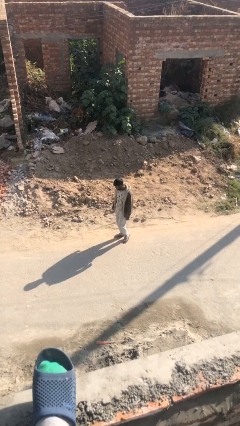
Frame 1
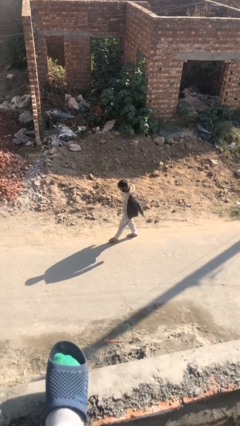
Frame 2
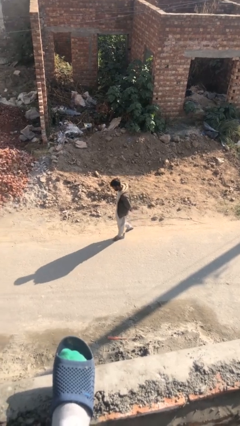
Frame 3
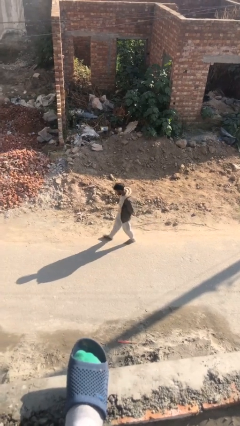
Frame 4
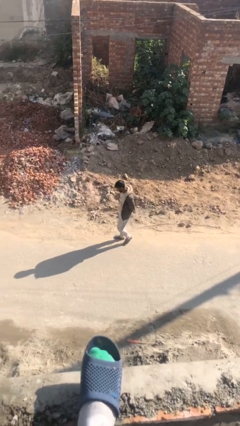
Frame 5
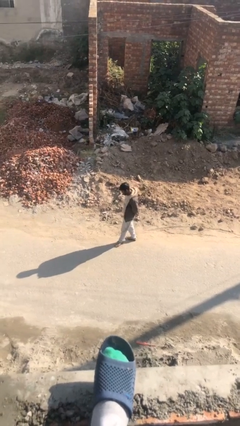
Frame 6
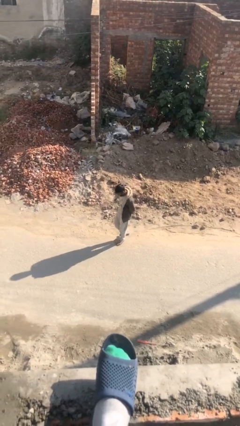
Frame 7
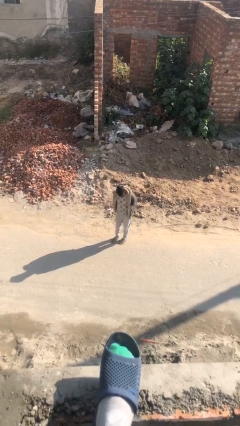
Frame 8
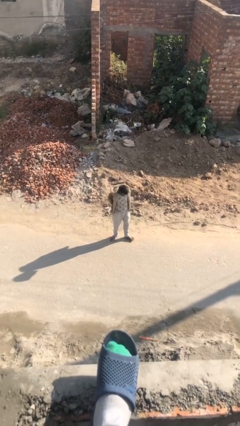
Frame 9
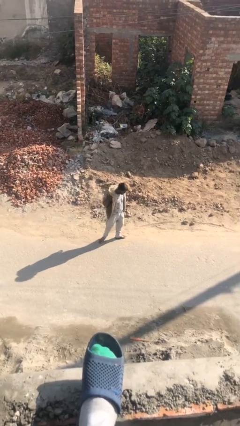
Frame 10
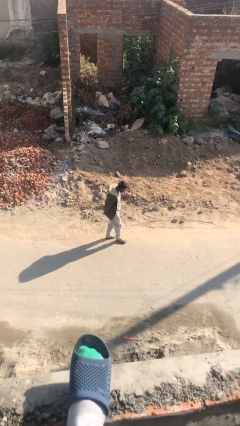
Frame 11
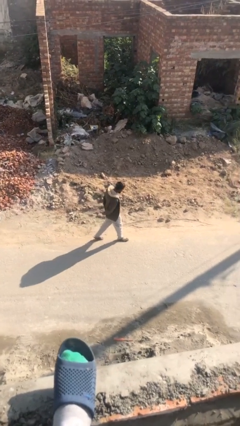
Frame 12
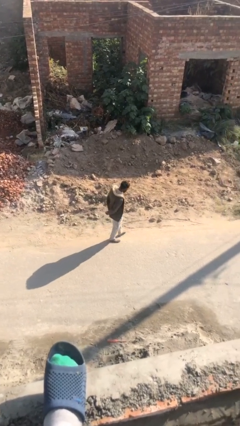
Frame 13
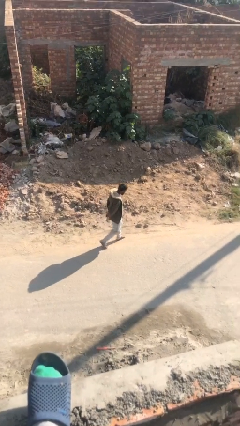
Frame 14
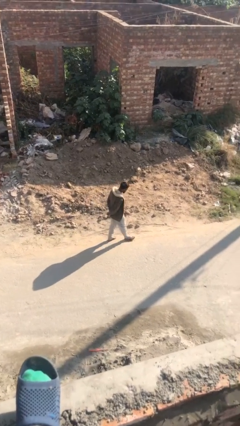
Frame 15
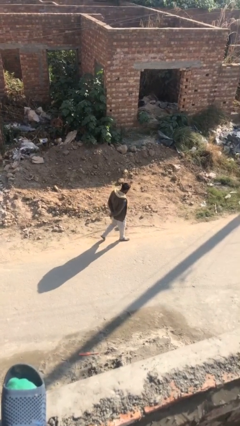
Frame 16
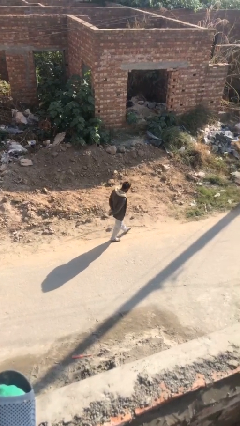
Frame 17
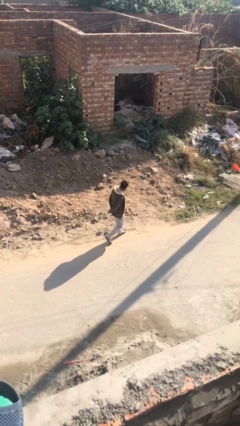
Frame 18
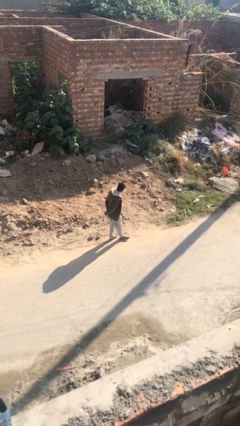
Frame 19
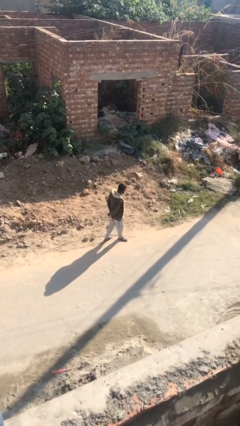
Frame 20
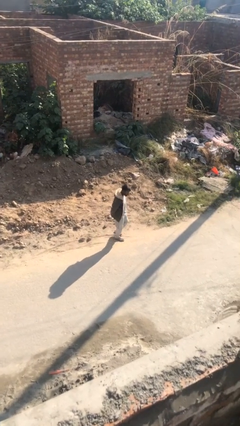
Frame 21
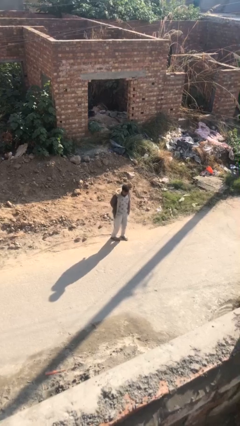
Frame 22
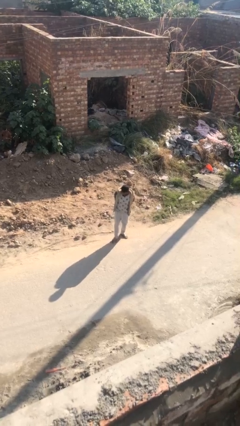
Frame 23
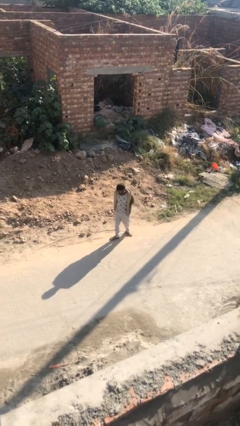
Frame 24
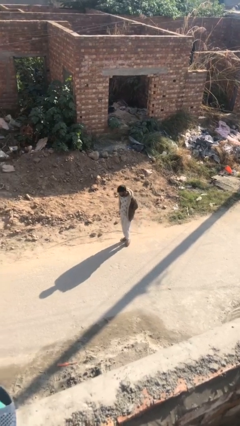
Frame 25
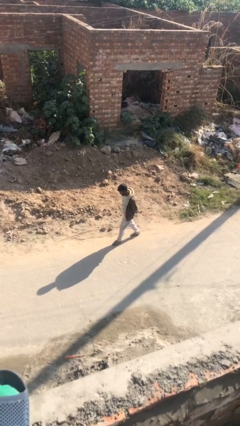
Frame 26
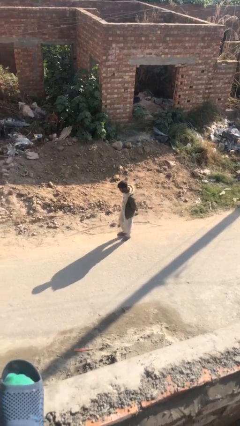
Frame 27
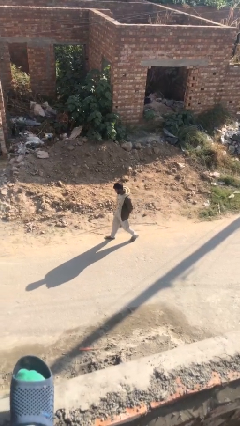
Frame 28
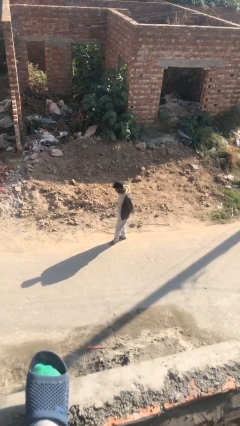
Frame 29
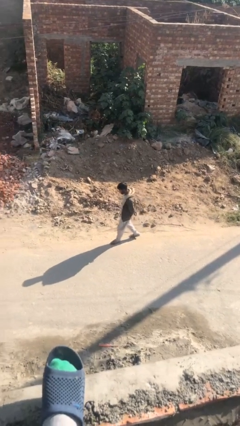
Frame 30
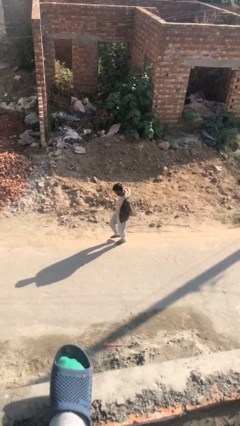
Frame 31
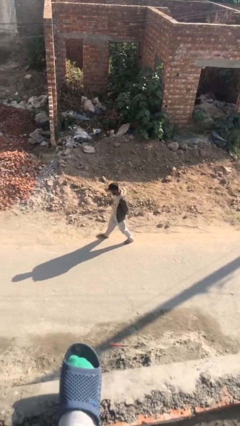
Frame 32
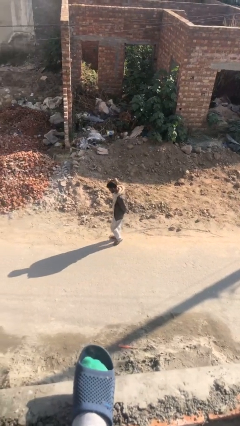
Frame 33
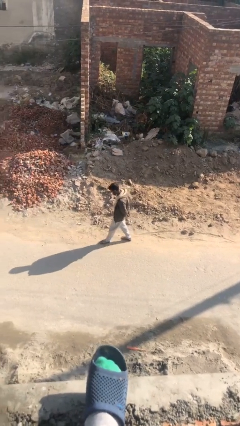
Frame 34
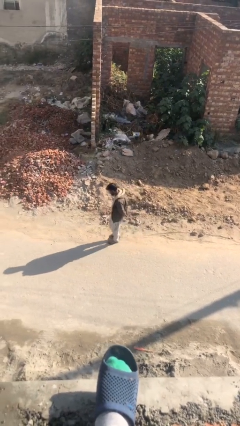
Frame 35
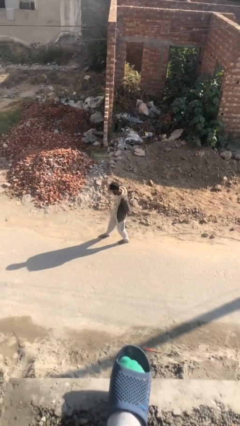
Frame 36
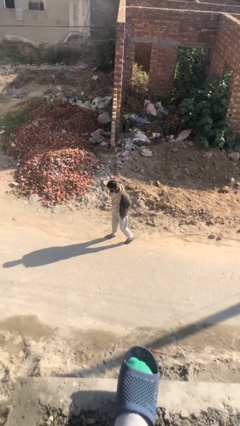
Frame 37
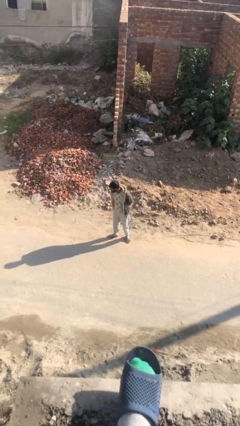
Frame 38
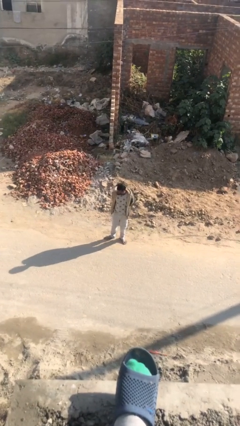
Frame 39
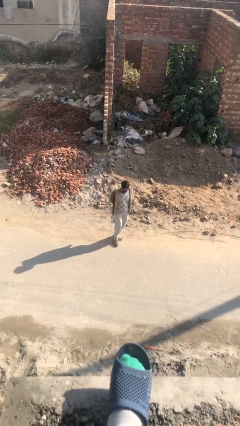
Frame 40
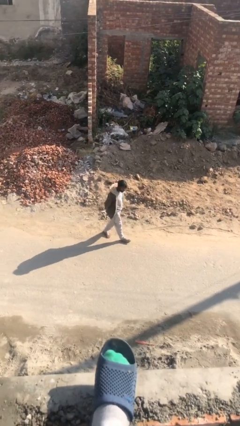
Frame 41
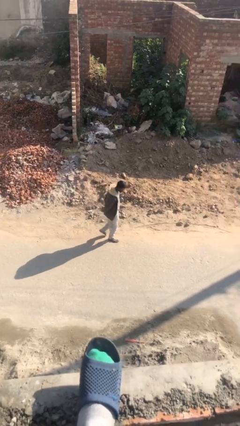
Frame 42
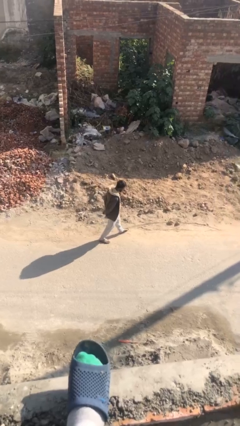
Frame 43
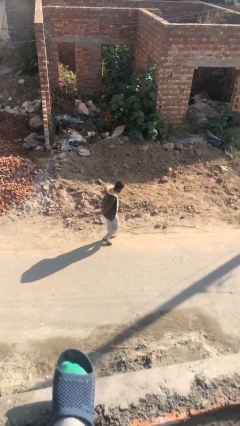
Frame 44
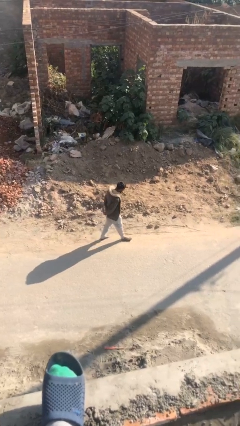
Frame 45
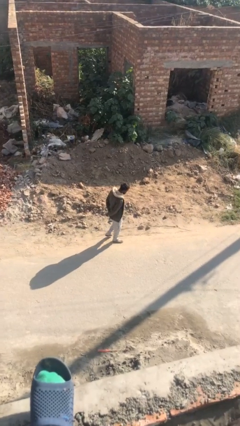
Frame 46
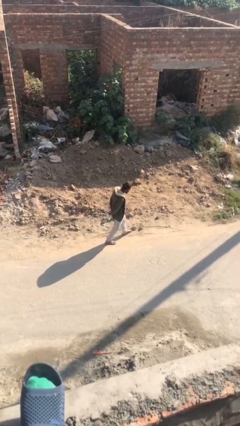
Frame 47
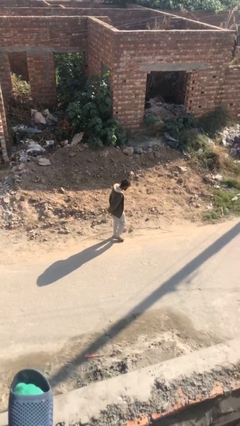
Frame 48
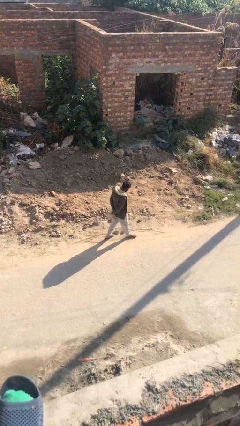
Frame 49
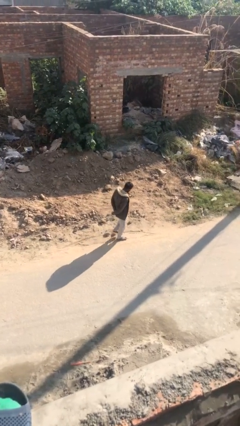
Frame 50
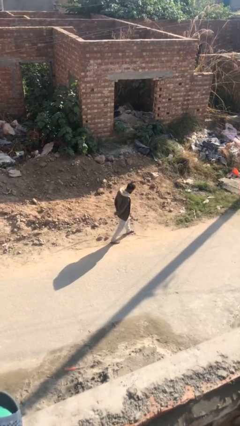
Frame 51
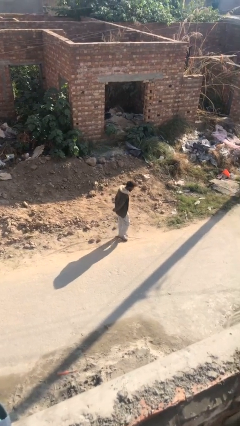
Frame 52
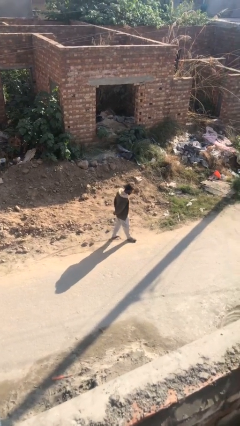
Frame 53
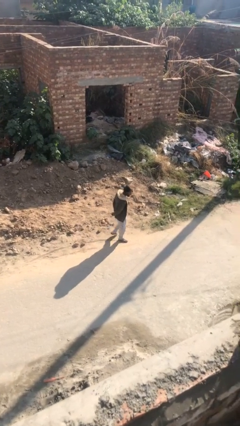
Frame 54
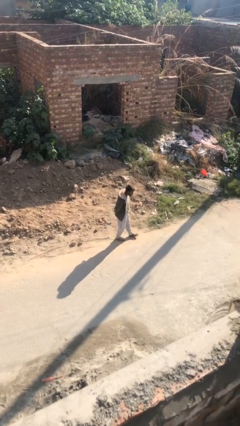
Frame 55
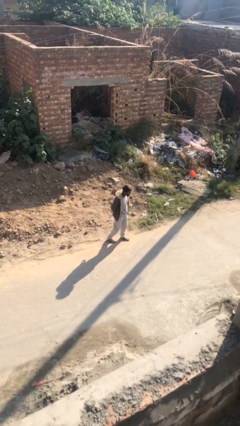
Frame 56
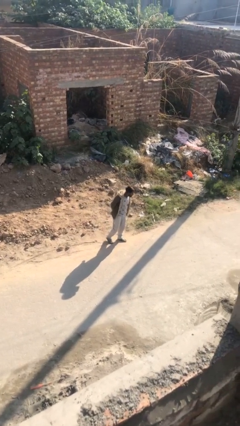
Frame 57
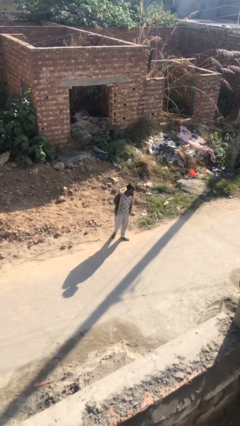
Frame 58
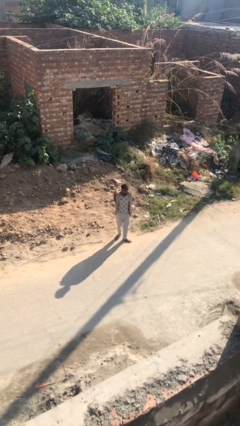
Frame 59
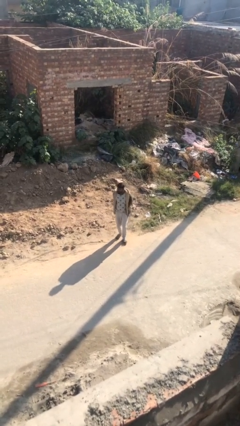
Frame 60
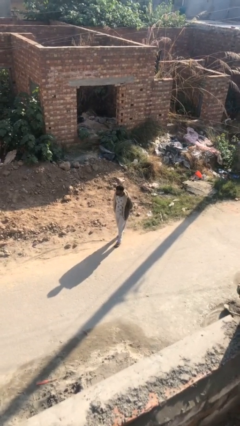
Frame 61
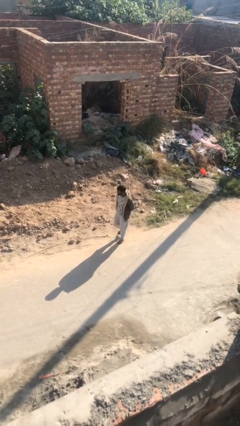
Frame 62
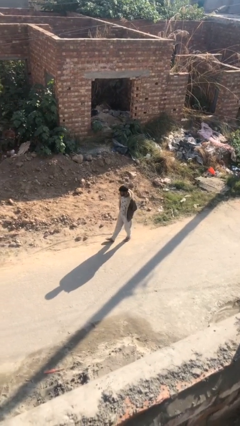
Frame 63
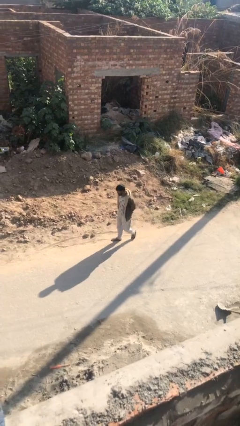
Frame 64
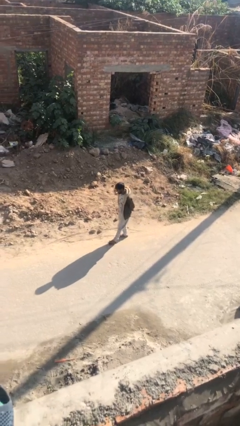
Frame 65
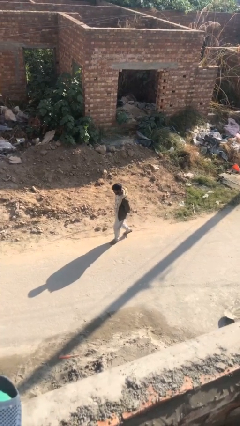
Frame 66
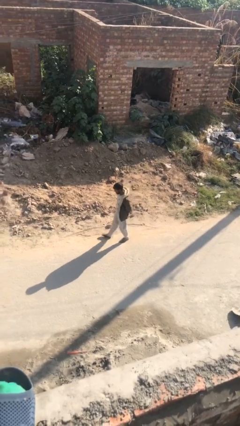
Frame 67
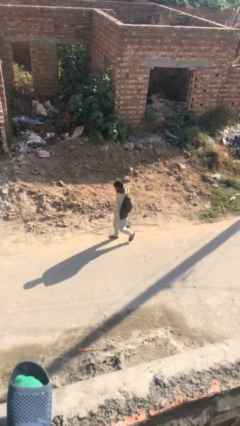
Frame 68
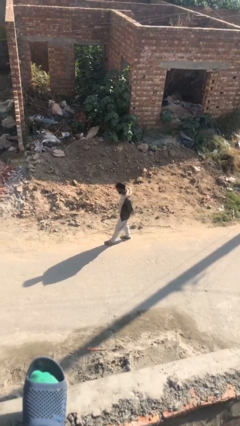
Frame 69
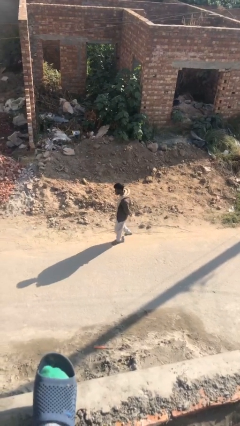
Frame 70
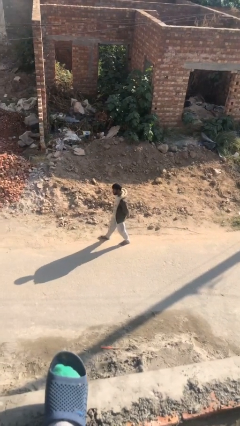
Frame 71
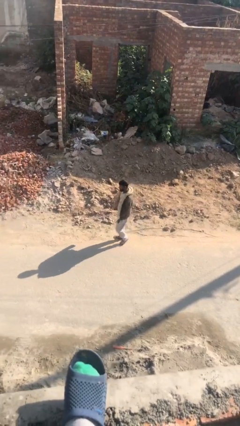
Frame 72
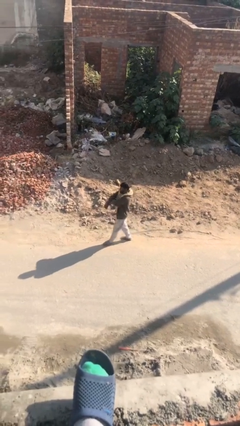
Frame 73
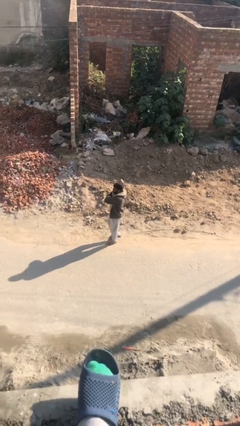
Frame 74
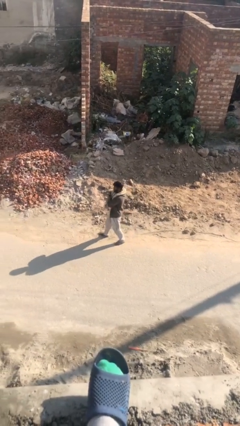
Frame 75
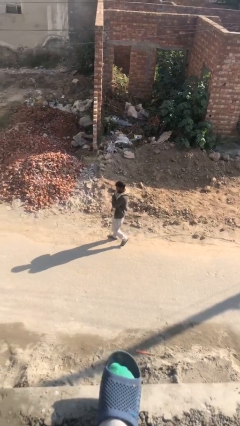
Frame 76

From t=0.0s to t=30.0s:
person walks

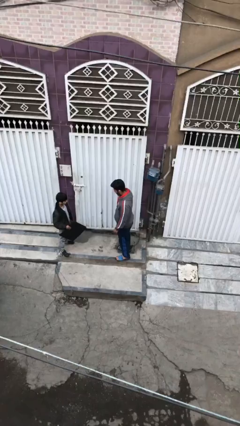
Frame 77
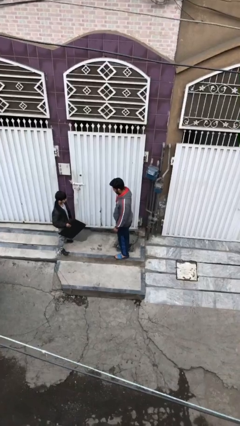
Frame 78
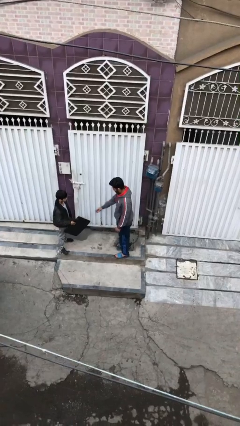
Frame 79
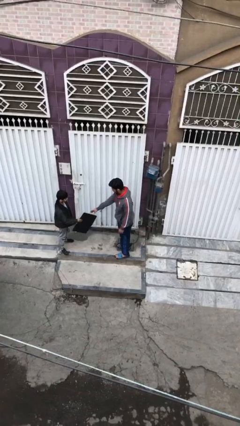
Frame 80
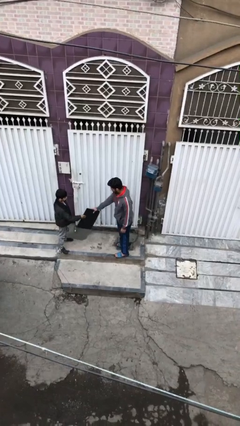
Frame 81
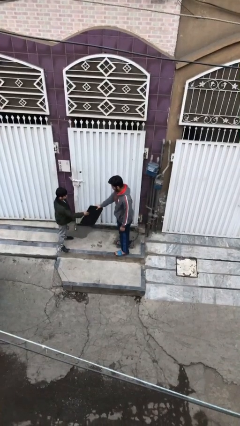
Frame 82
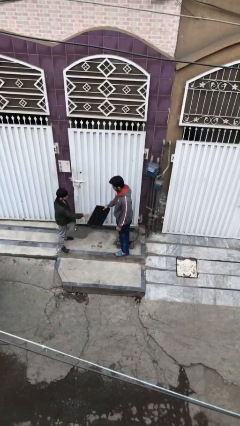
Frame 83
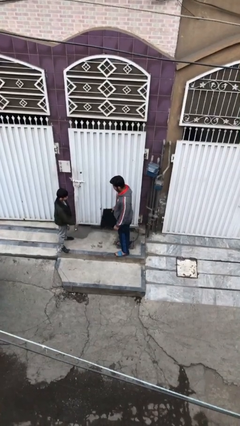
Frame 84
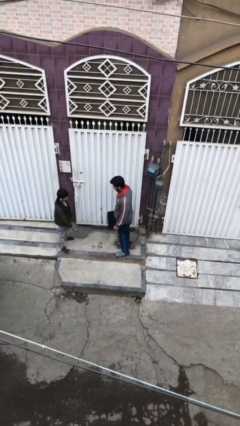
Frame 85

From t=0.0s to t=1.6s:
person transfers object to person

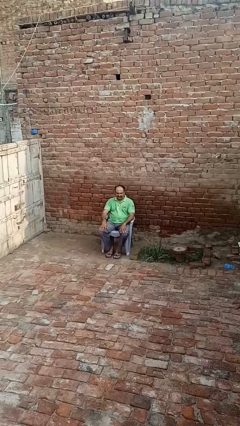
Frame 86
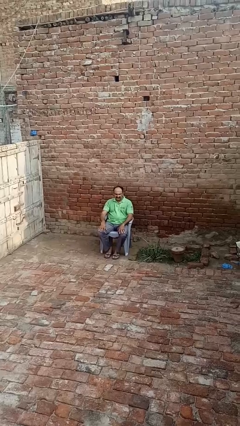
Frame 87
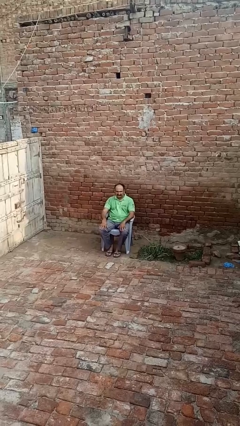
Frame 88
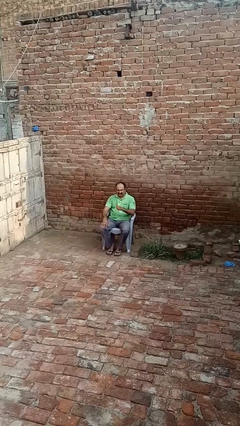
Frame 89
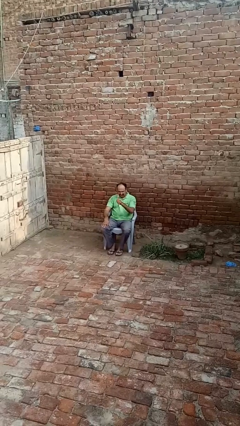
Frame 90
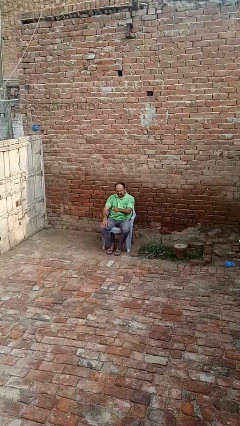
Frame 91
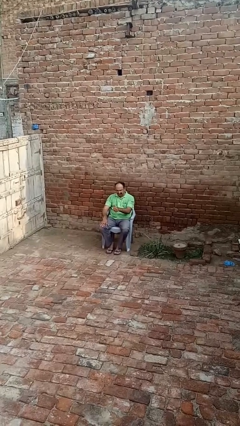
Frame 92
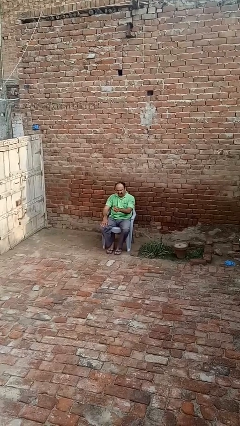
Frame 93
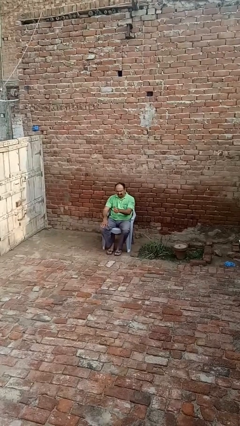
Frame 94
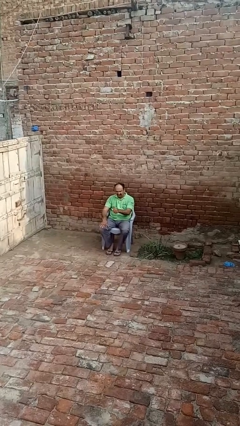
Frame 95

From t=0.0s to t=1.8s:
person gestures thumbs up
